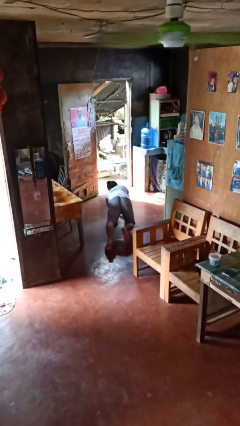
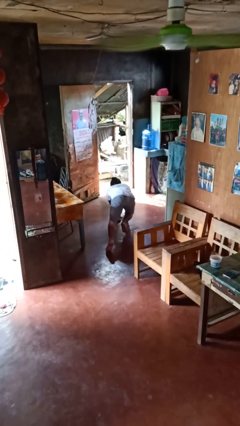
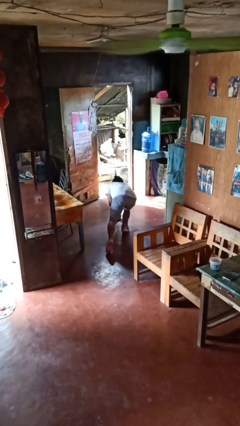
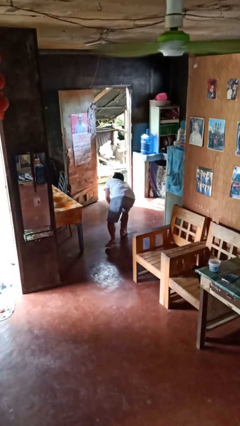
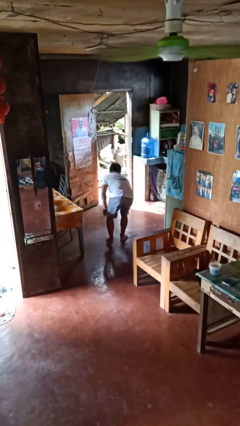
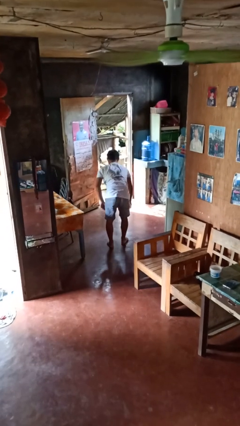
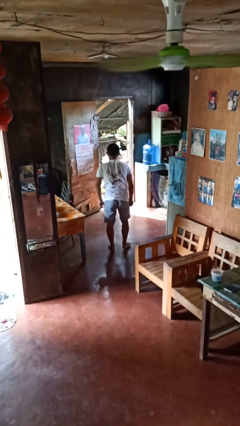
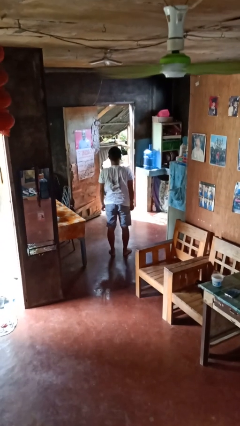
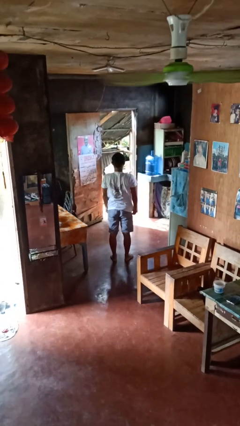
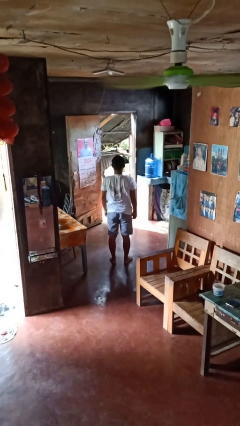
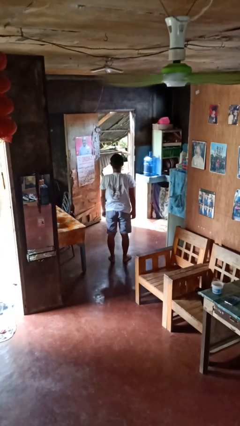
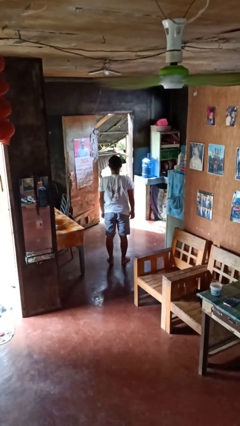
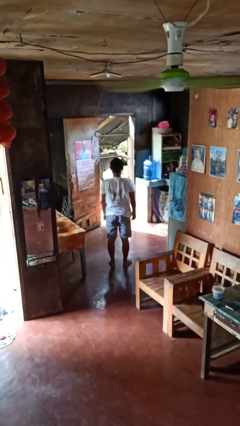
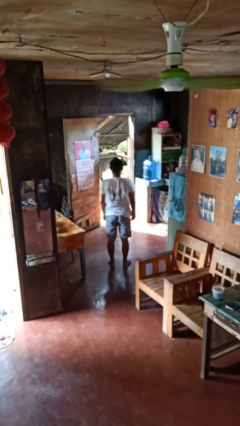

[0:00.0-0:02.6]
person stands up from floor

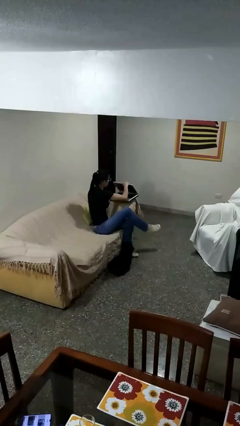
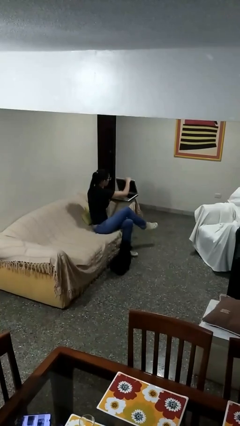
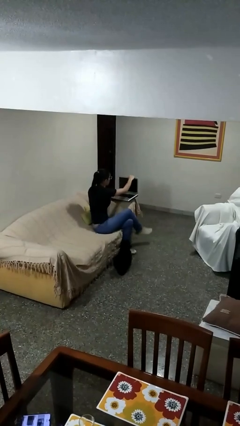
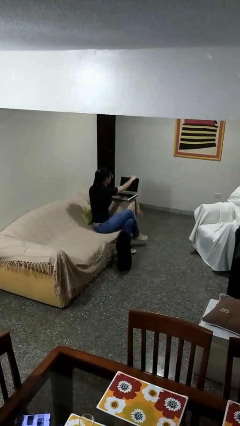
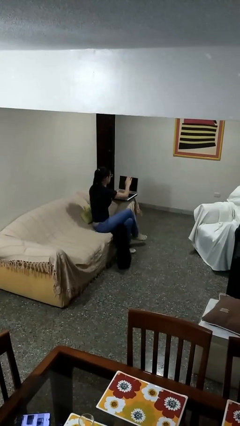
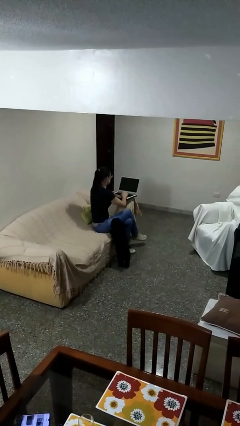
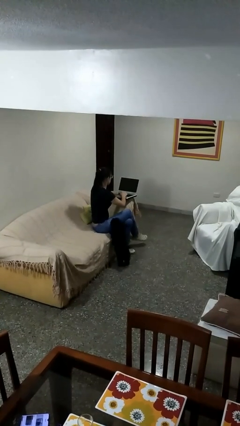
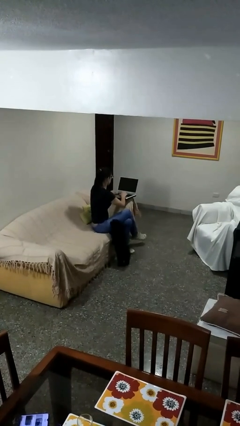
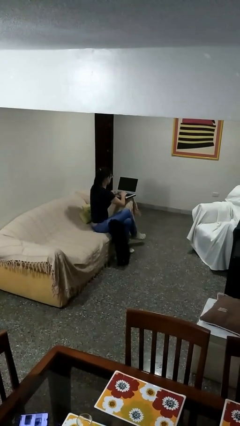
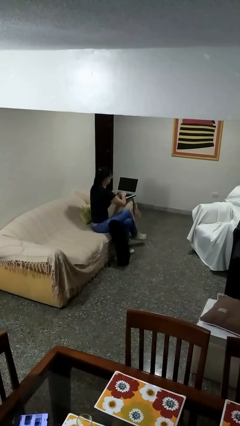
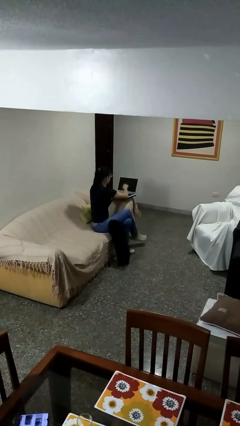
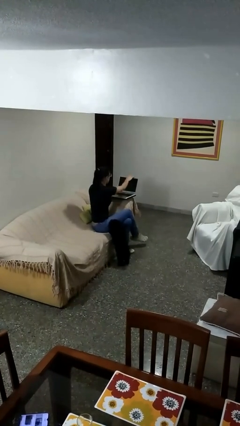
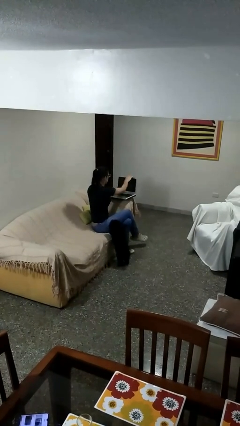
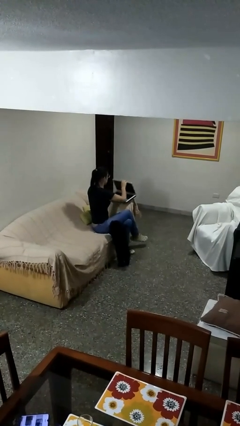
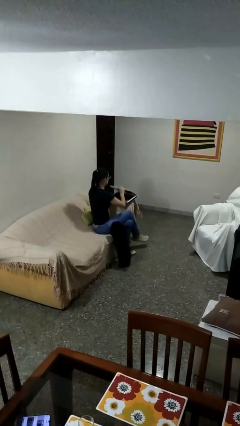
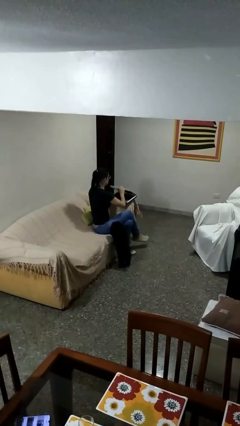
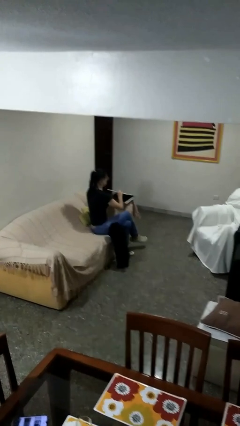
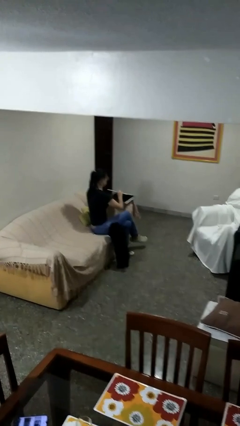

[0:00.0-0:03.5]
person interacts with laptop

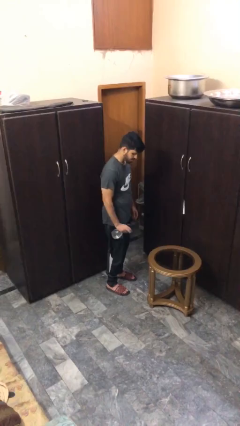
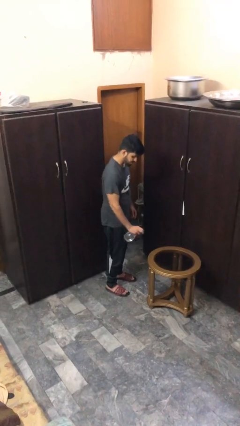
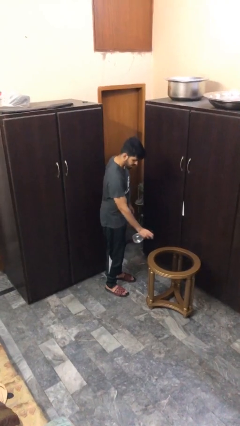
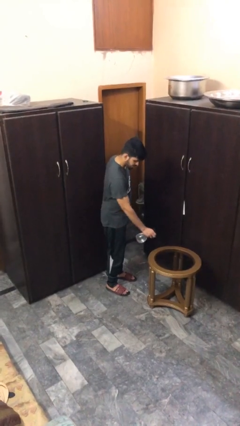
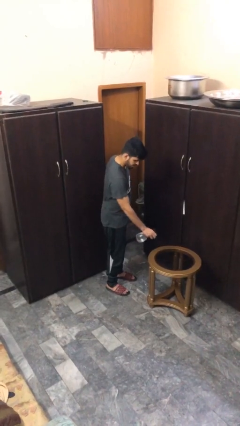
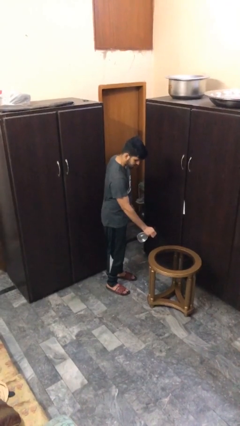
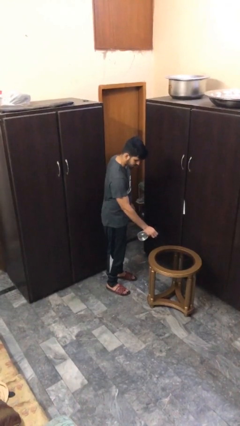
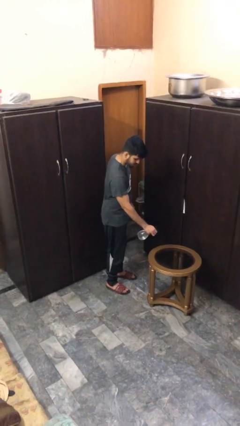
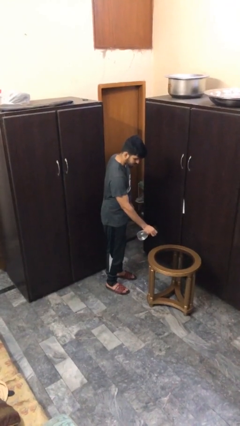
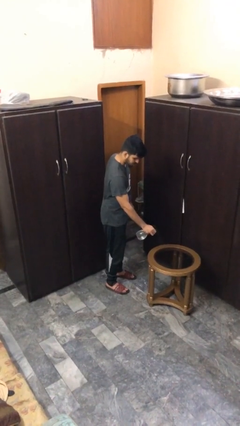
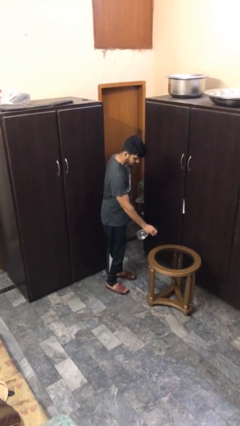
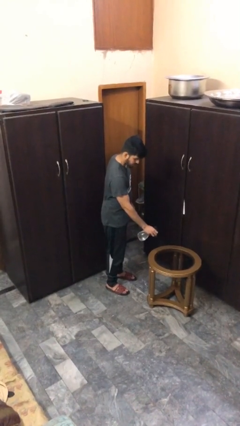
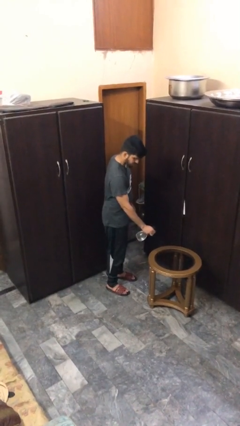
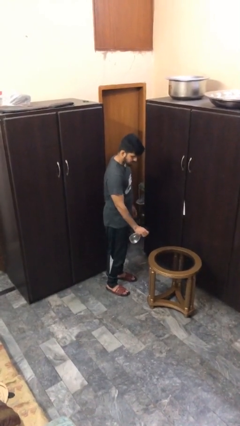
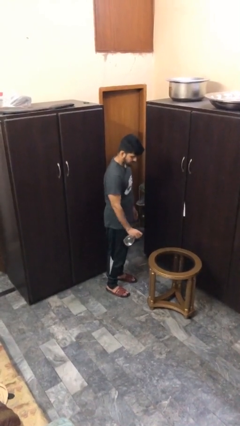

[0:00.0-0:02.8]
person sprays from bottle

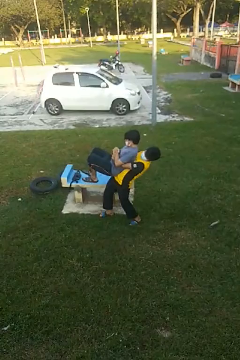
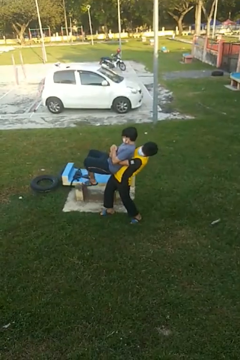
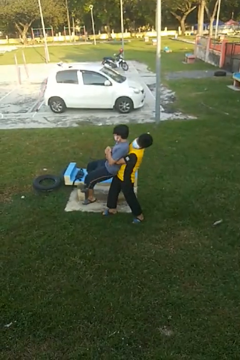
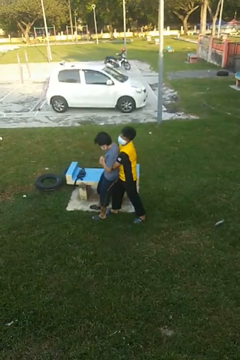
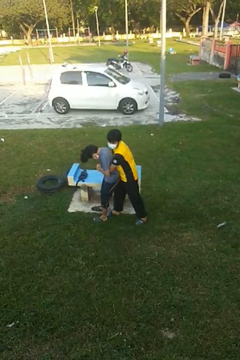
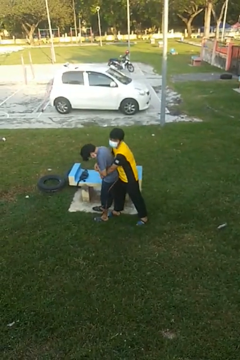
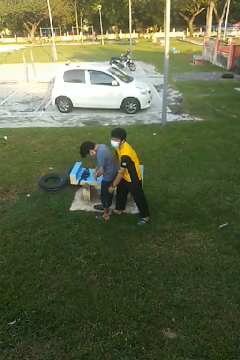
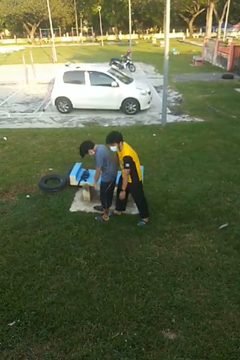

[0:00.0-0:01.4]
person puts down person

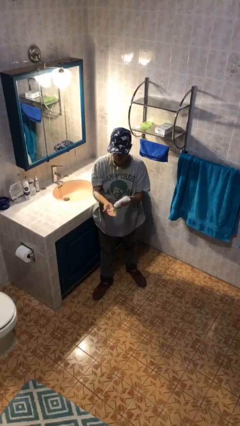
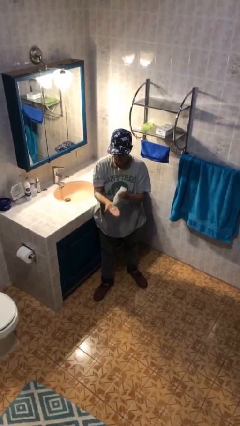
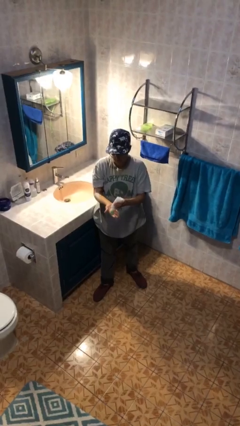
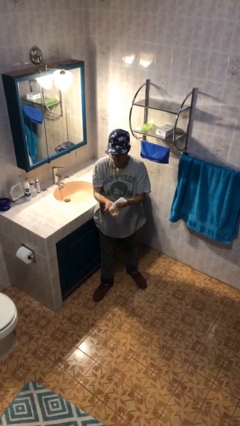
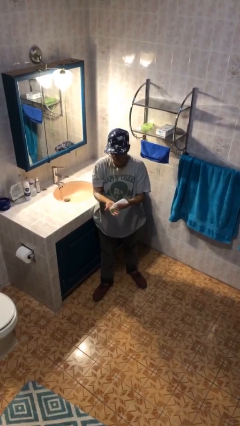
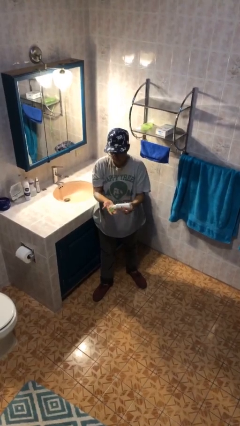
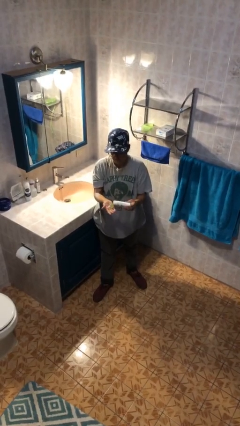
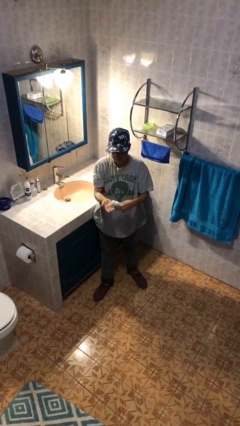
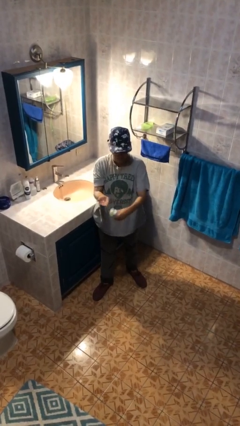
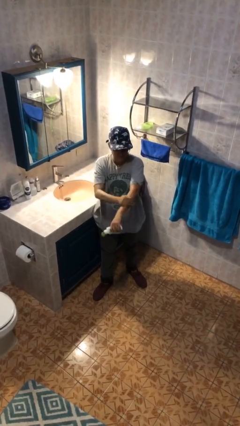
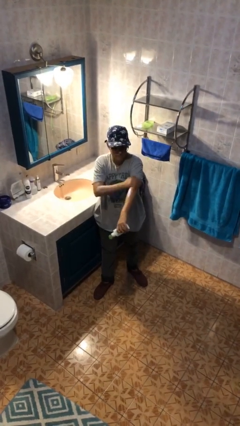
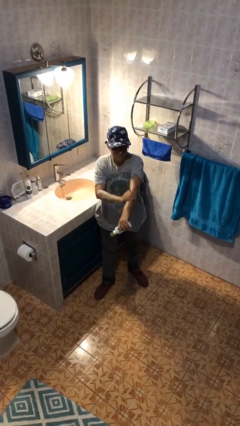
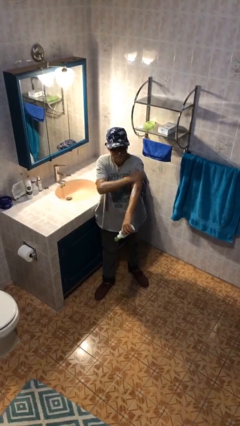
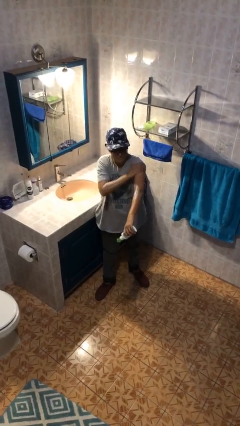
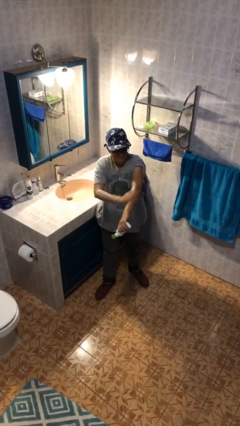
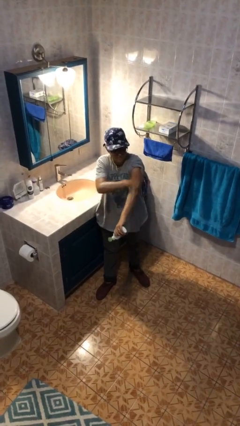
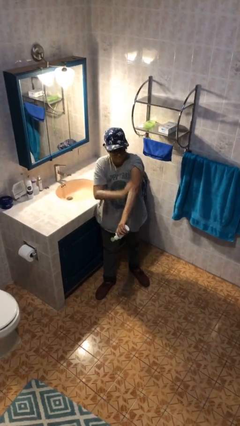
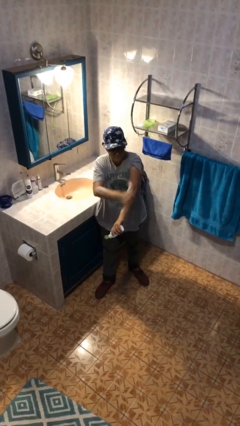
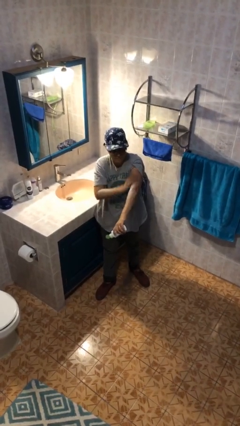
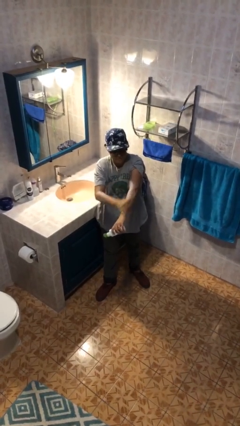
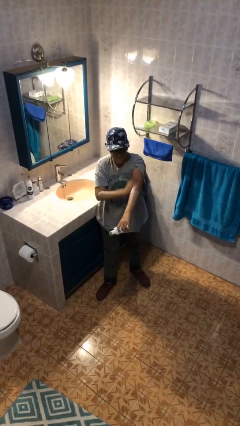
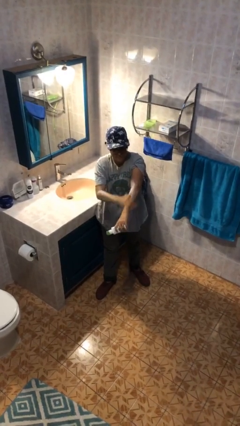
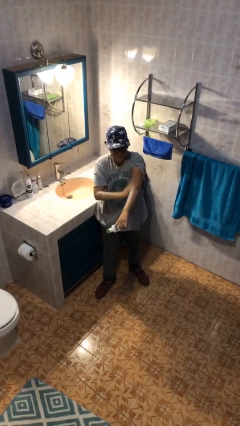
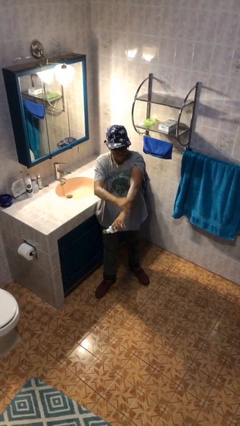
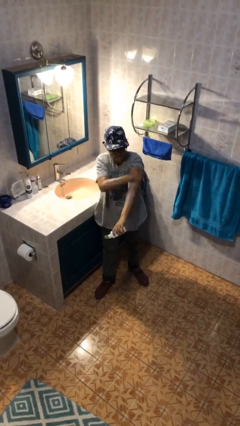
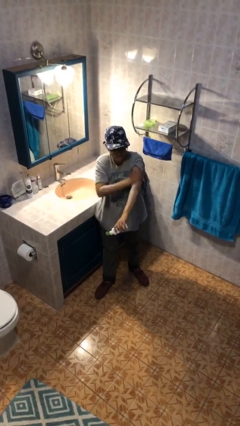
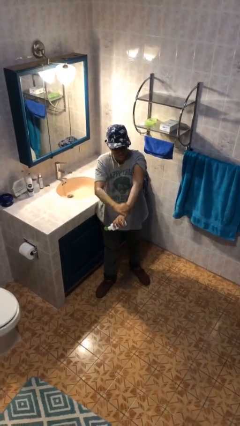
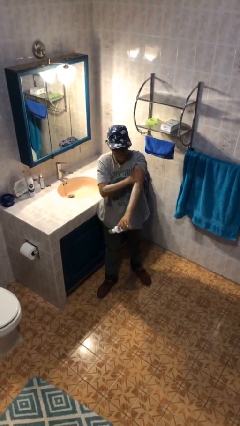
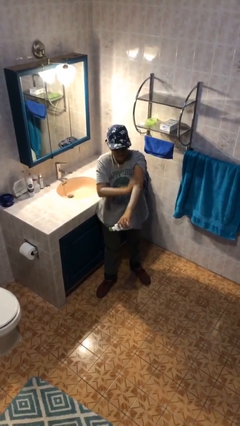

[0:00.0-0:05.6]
person applies sunscreen

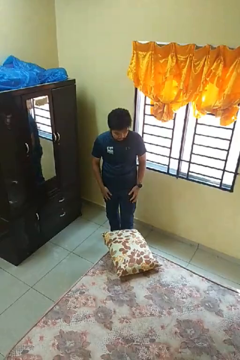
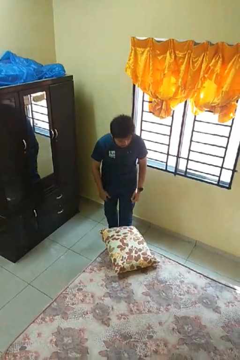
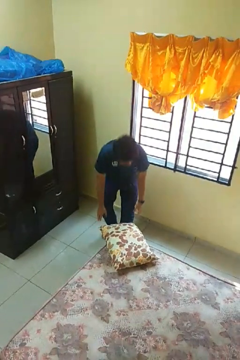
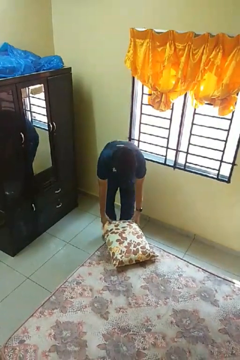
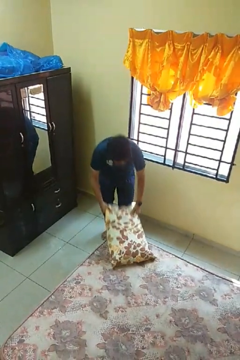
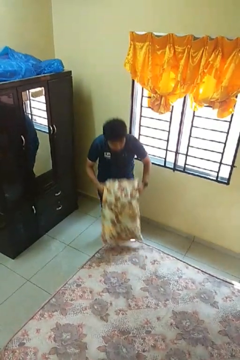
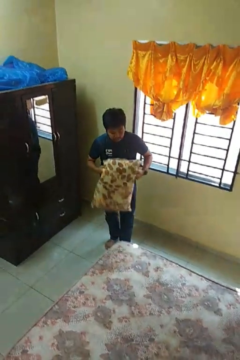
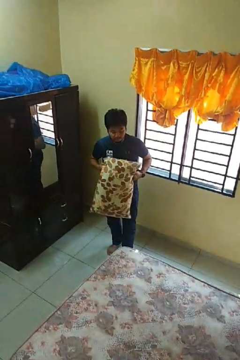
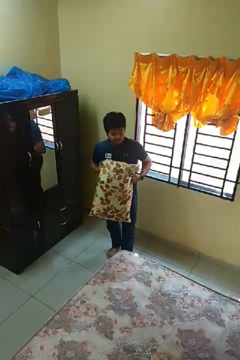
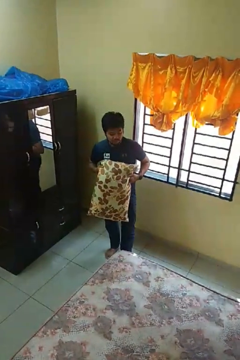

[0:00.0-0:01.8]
person picks up object from bed

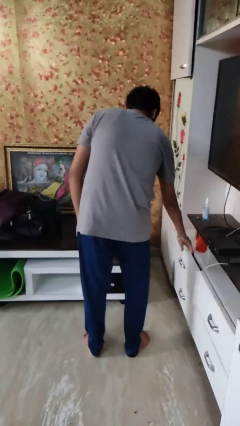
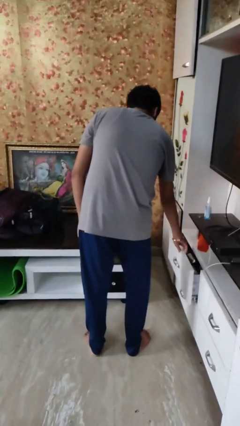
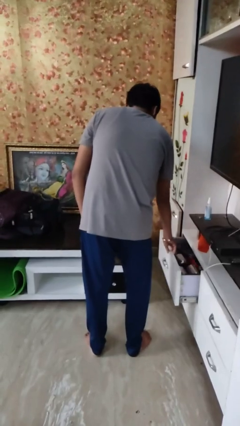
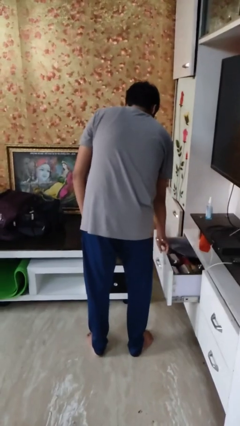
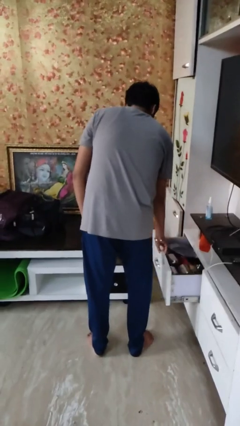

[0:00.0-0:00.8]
person opens kitchen drawer
